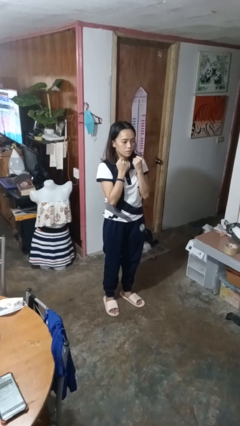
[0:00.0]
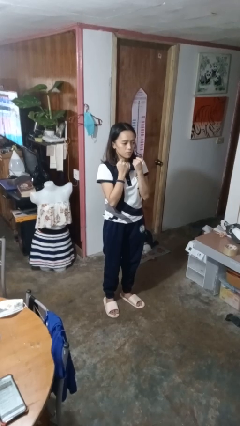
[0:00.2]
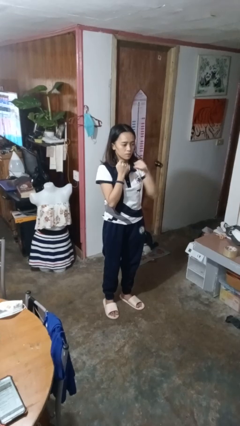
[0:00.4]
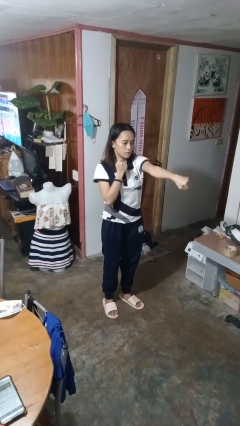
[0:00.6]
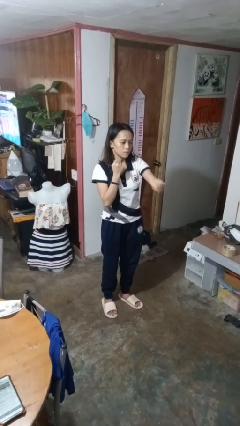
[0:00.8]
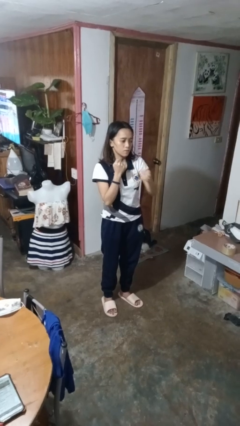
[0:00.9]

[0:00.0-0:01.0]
person punches

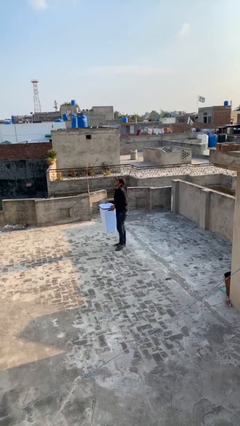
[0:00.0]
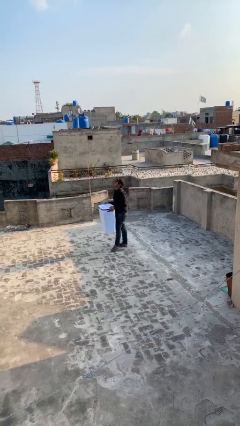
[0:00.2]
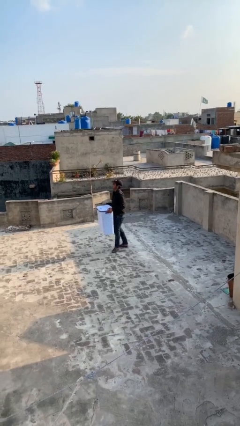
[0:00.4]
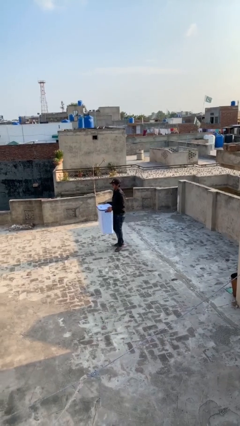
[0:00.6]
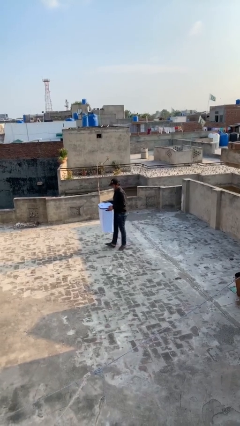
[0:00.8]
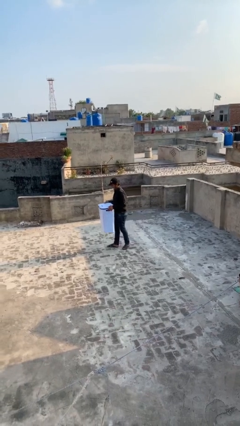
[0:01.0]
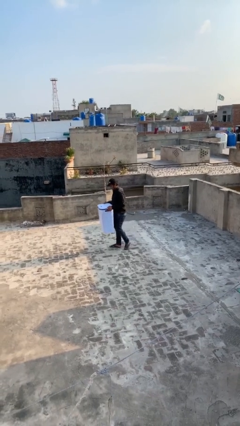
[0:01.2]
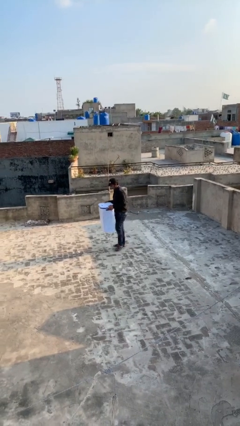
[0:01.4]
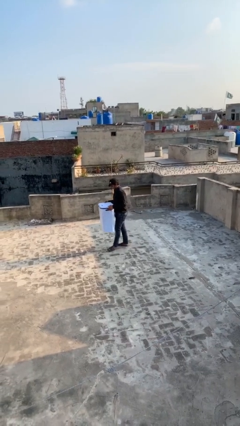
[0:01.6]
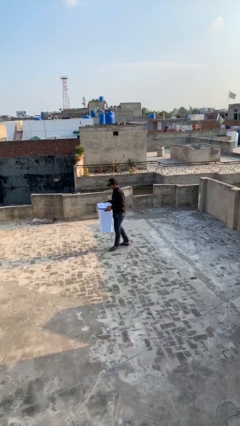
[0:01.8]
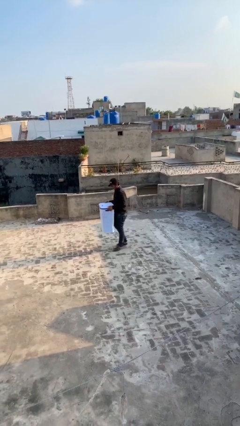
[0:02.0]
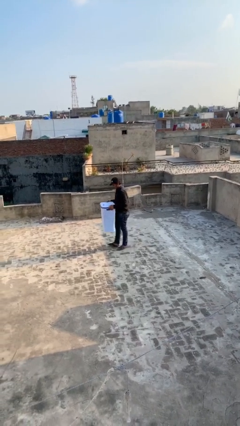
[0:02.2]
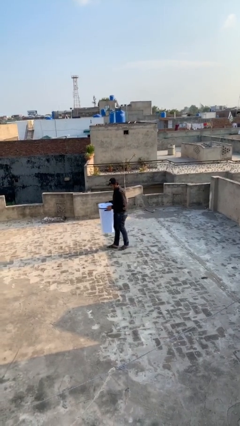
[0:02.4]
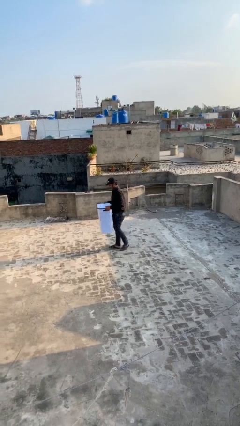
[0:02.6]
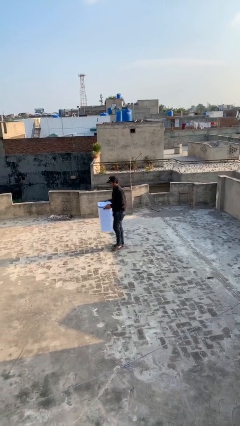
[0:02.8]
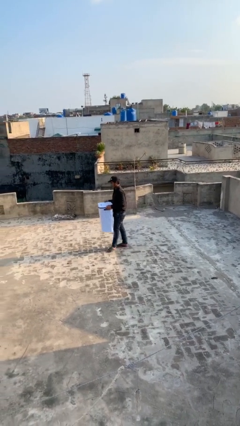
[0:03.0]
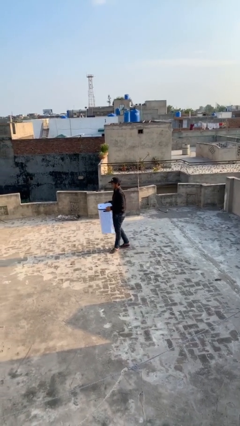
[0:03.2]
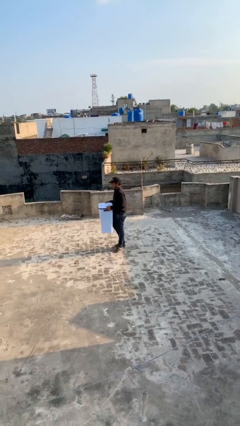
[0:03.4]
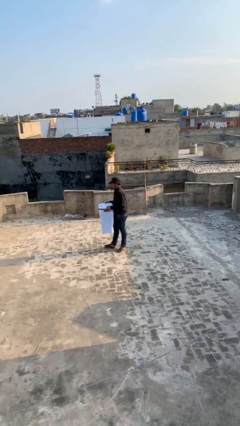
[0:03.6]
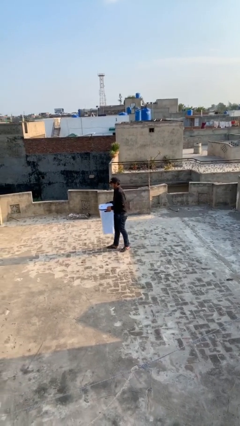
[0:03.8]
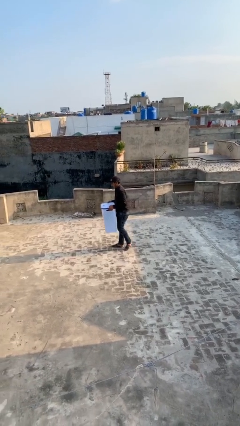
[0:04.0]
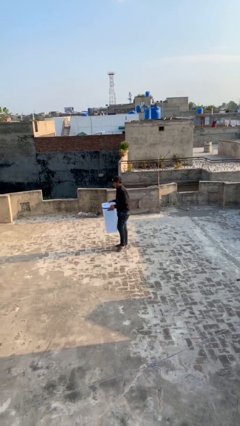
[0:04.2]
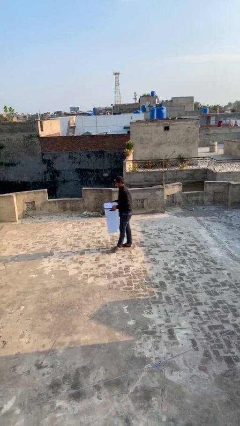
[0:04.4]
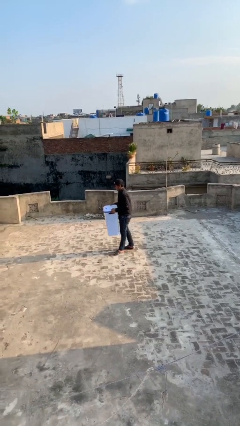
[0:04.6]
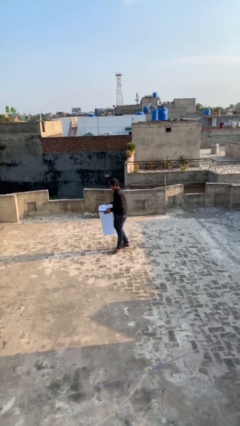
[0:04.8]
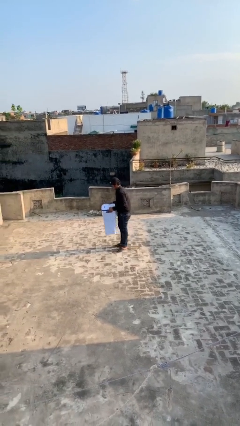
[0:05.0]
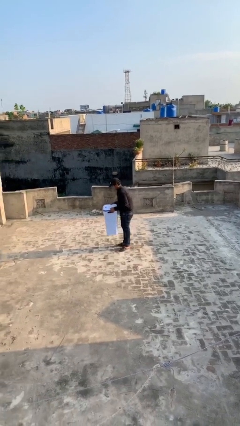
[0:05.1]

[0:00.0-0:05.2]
person carries heavy object

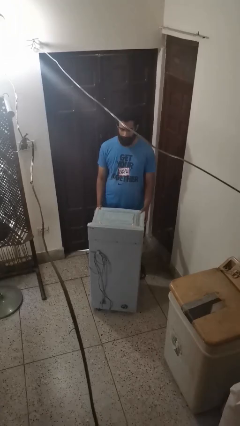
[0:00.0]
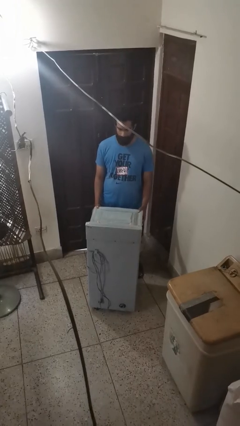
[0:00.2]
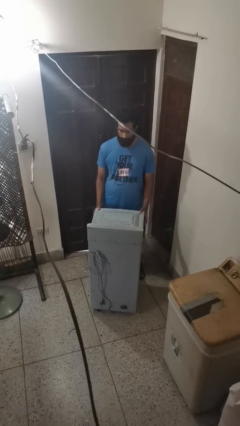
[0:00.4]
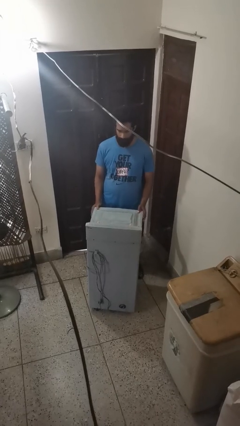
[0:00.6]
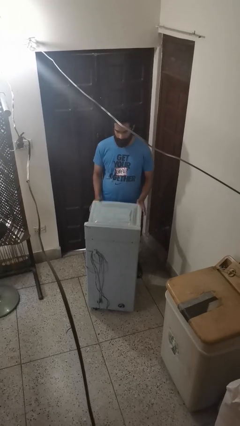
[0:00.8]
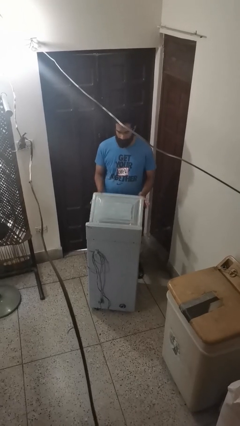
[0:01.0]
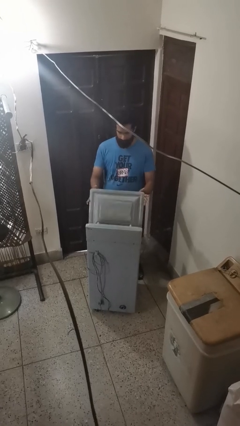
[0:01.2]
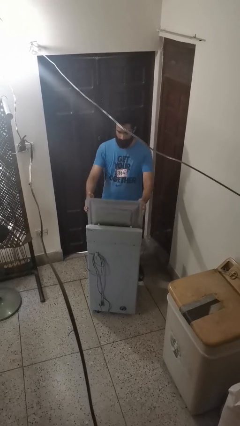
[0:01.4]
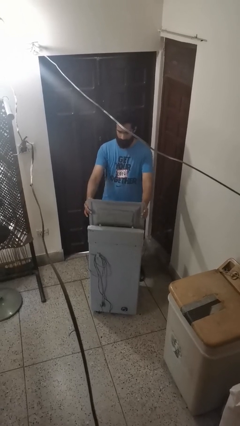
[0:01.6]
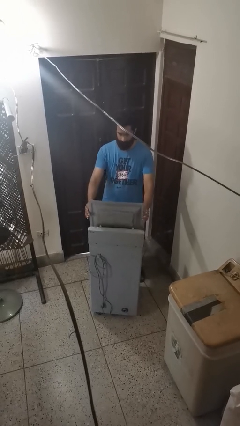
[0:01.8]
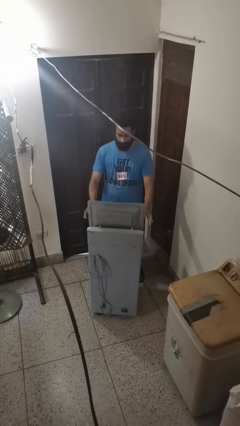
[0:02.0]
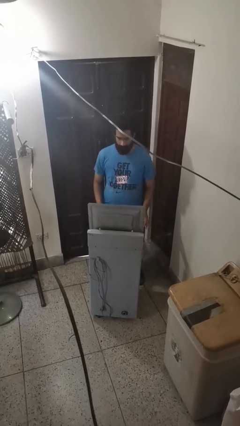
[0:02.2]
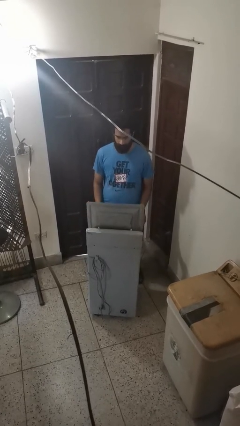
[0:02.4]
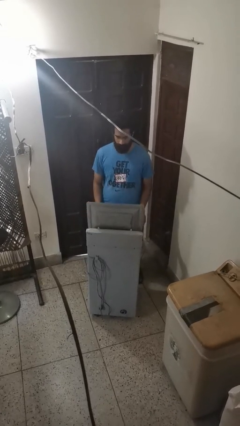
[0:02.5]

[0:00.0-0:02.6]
person opens clothes washer

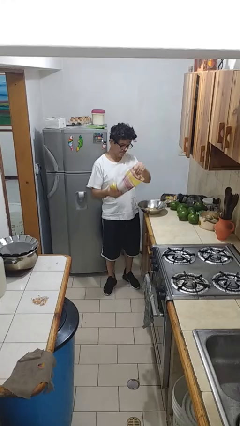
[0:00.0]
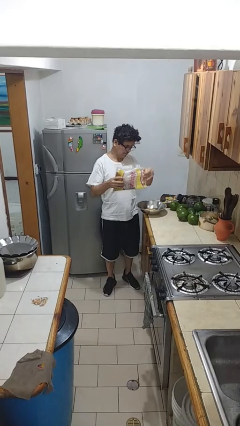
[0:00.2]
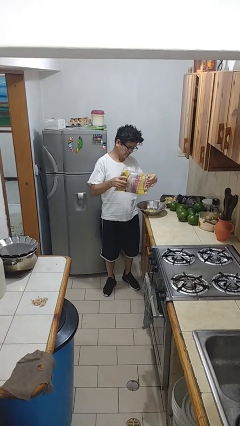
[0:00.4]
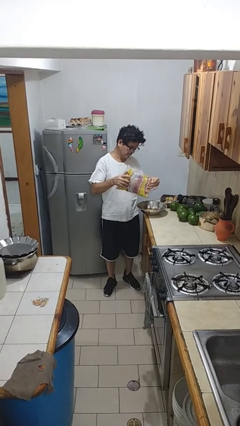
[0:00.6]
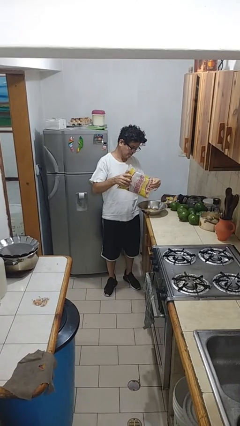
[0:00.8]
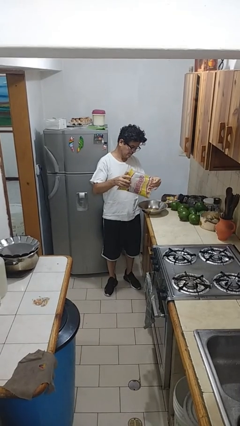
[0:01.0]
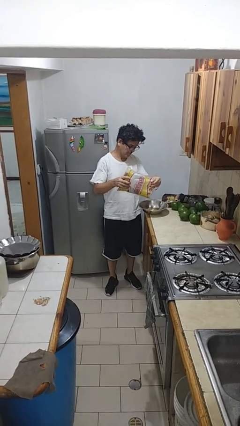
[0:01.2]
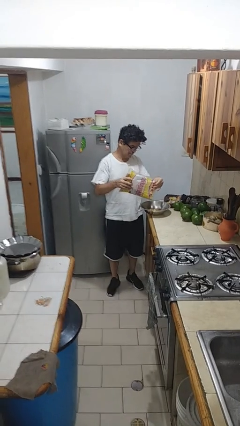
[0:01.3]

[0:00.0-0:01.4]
person pours into bowl

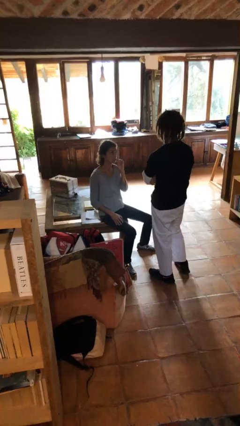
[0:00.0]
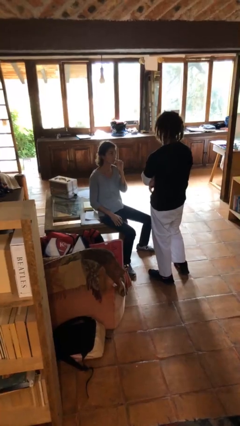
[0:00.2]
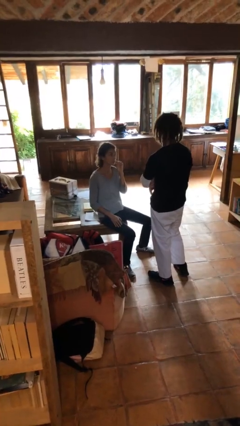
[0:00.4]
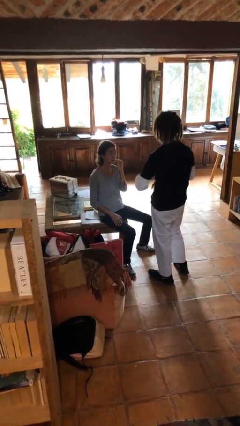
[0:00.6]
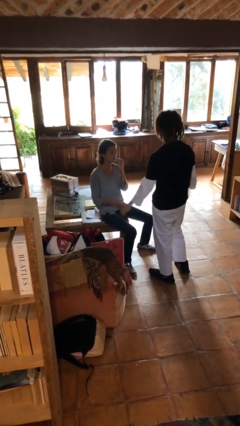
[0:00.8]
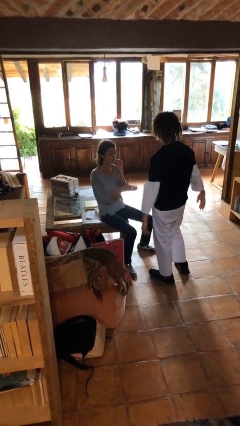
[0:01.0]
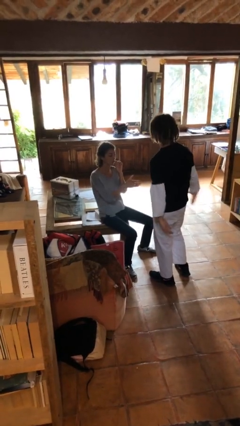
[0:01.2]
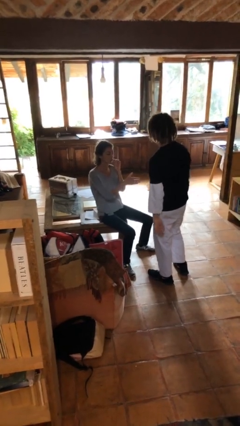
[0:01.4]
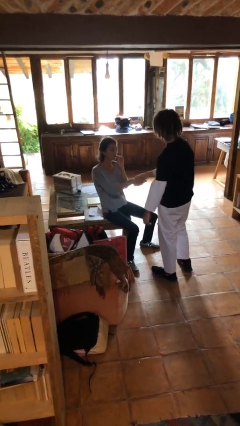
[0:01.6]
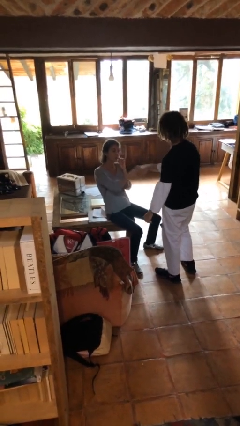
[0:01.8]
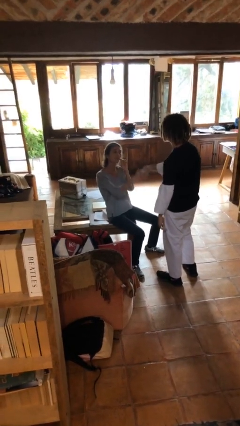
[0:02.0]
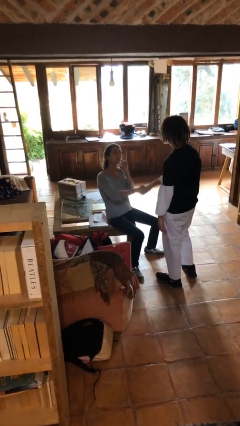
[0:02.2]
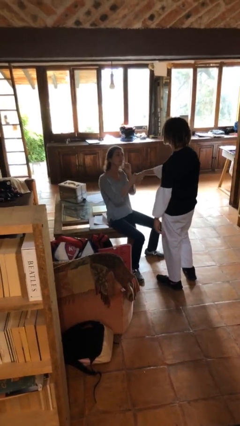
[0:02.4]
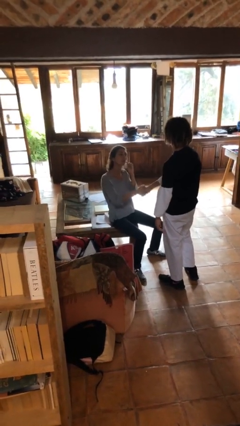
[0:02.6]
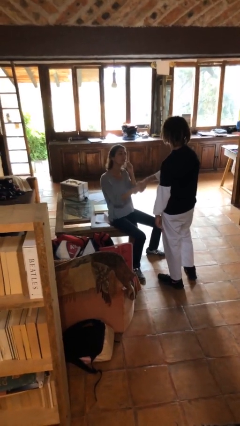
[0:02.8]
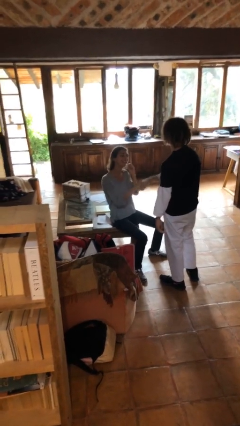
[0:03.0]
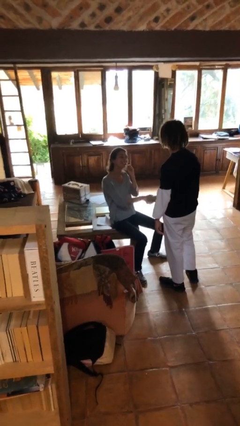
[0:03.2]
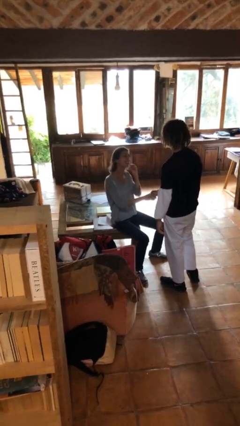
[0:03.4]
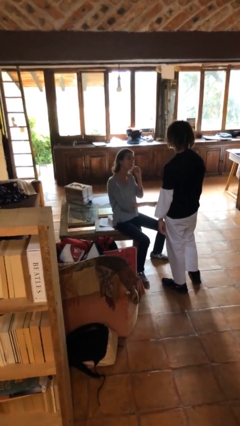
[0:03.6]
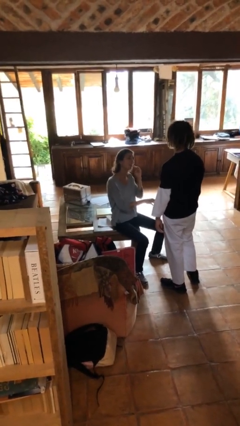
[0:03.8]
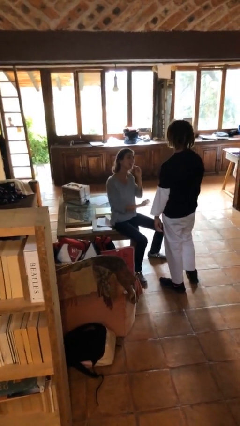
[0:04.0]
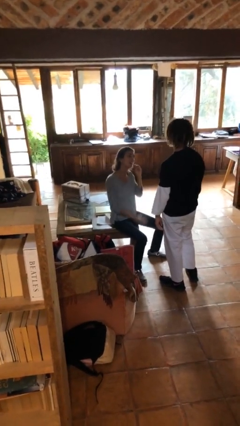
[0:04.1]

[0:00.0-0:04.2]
person shakes hand

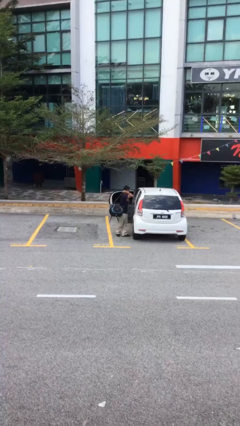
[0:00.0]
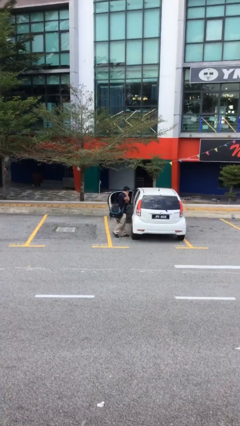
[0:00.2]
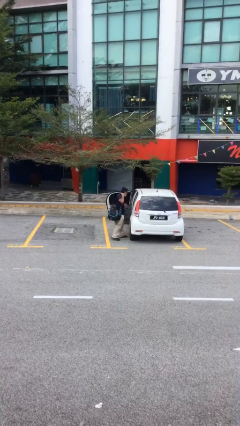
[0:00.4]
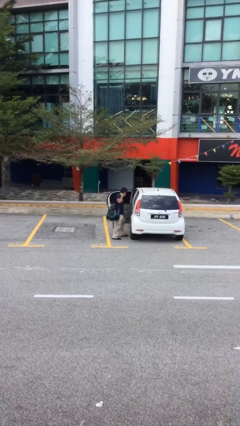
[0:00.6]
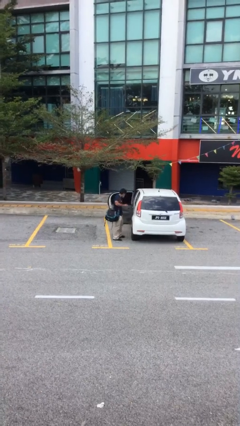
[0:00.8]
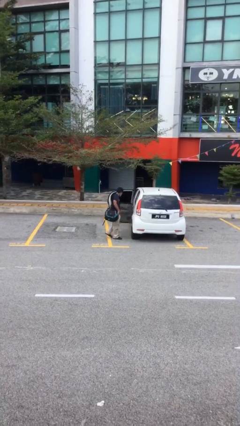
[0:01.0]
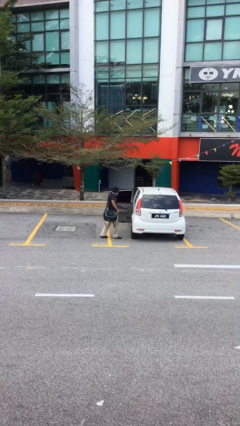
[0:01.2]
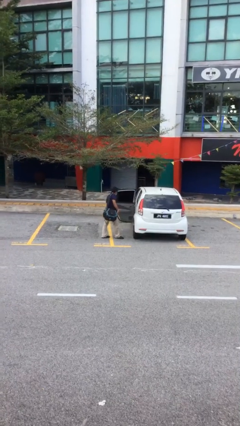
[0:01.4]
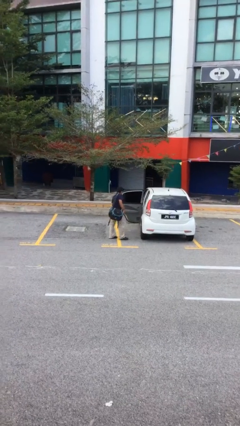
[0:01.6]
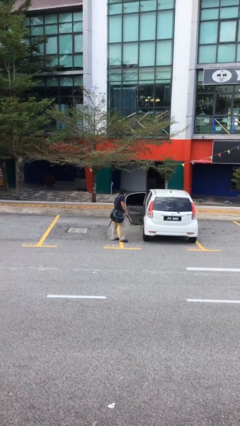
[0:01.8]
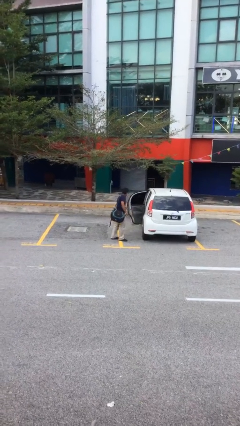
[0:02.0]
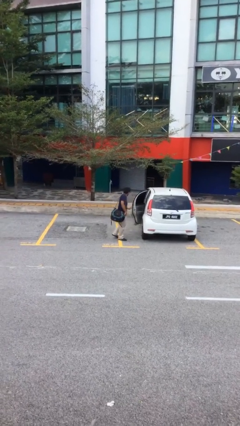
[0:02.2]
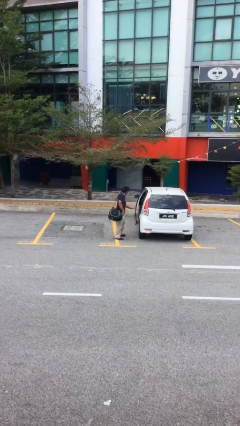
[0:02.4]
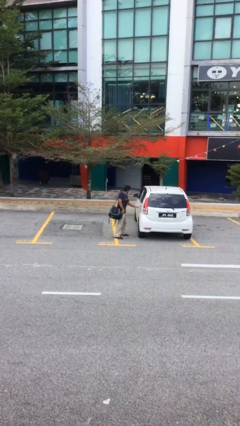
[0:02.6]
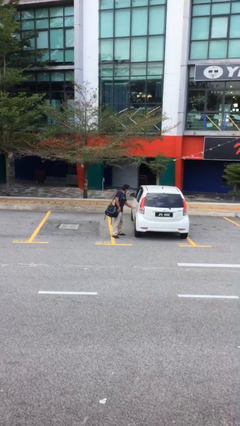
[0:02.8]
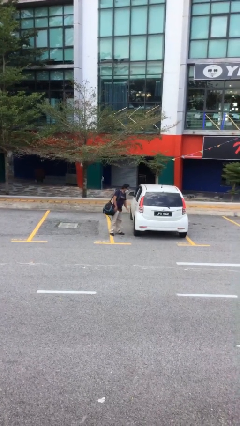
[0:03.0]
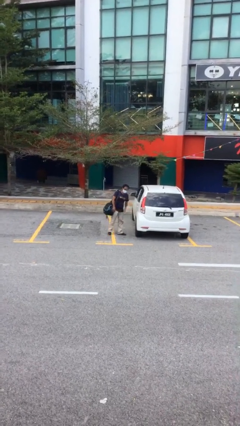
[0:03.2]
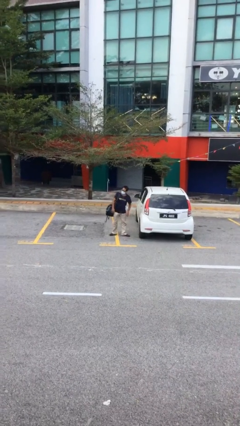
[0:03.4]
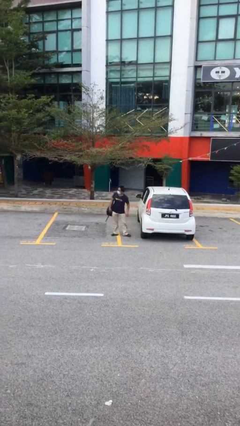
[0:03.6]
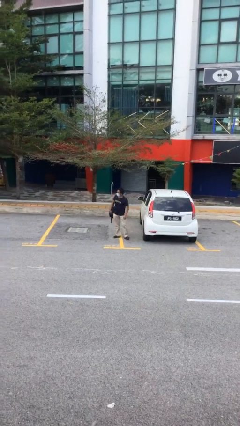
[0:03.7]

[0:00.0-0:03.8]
person closes car door
